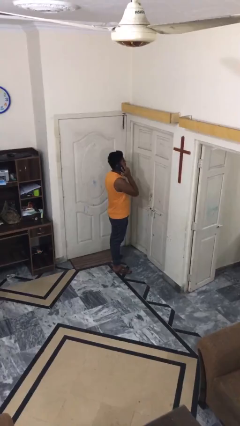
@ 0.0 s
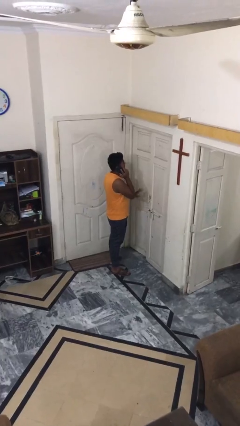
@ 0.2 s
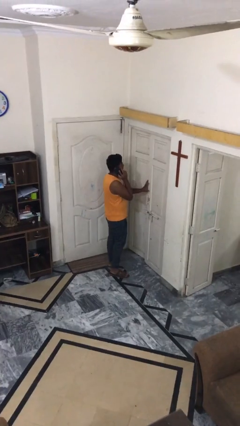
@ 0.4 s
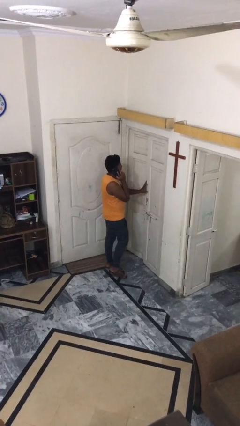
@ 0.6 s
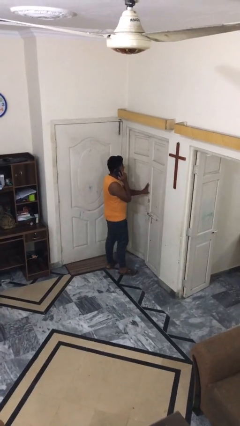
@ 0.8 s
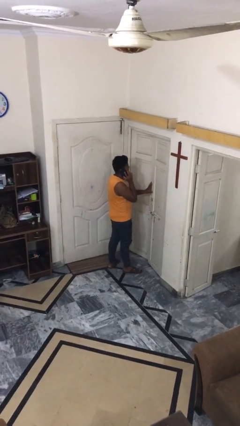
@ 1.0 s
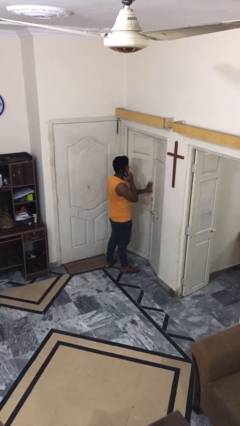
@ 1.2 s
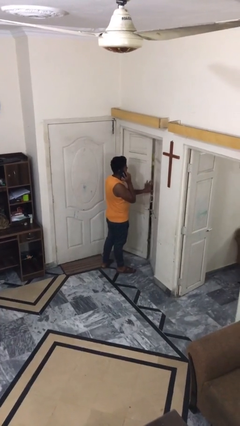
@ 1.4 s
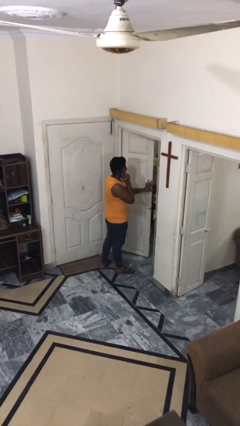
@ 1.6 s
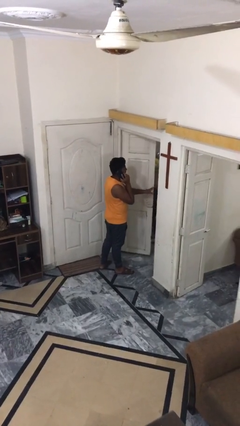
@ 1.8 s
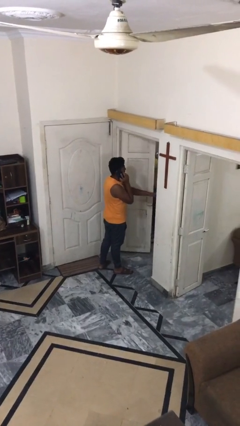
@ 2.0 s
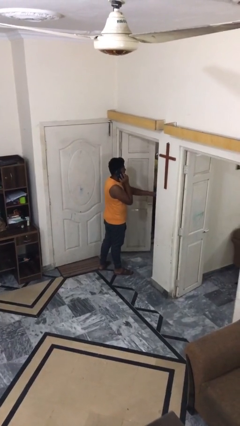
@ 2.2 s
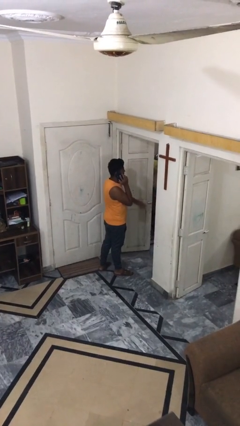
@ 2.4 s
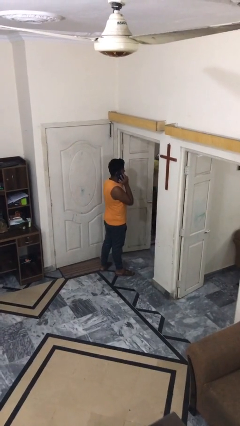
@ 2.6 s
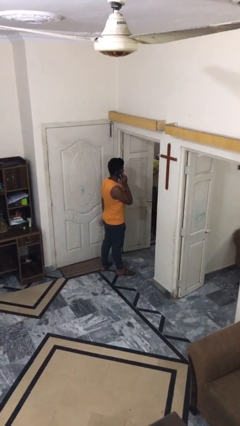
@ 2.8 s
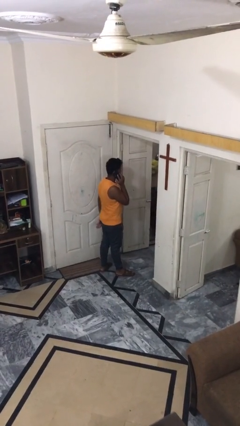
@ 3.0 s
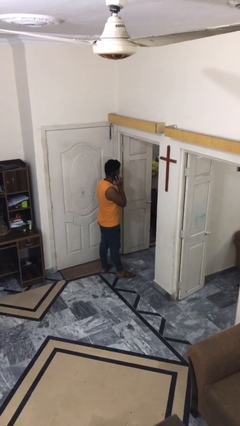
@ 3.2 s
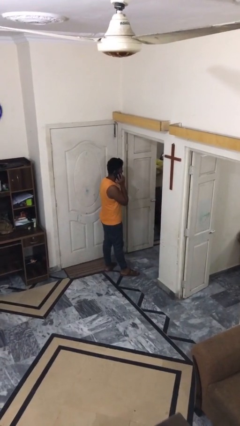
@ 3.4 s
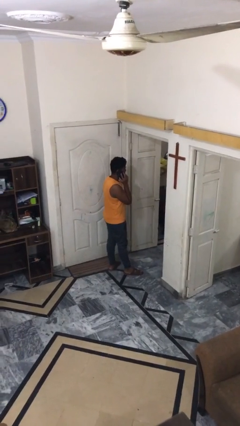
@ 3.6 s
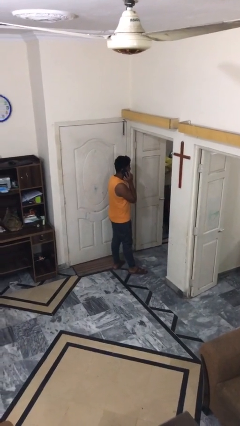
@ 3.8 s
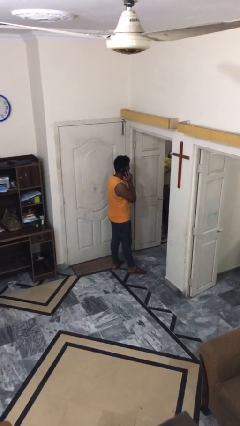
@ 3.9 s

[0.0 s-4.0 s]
person opens facility door

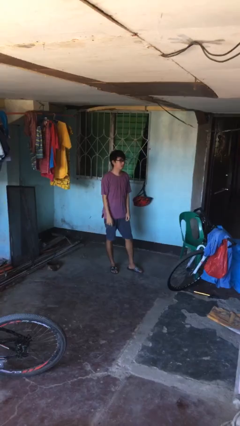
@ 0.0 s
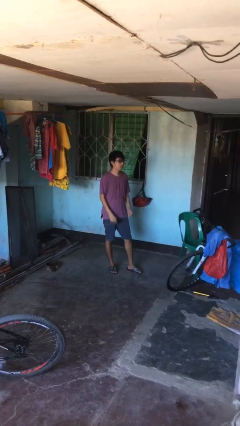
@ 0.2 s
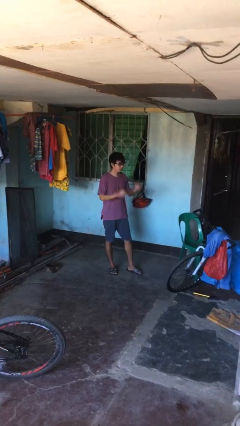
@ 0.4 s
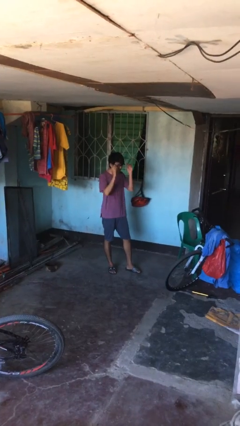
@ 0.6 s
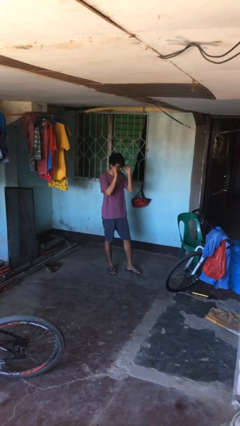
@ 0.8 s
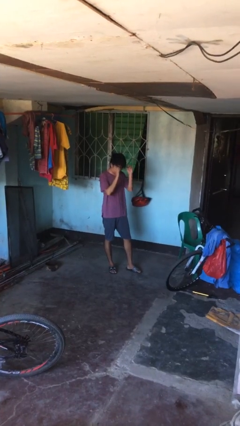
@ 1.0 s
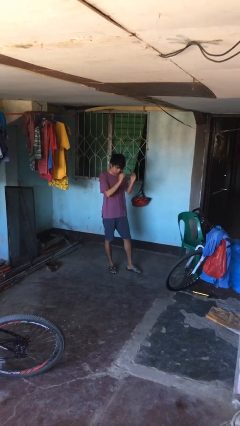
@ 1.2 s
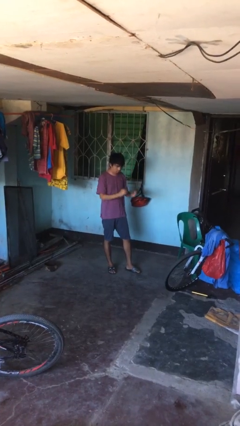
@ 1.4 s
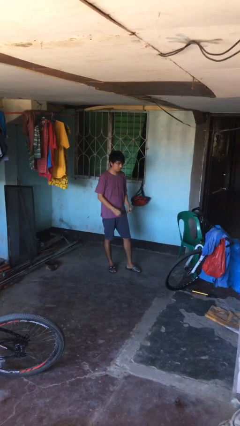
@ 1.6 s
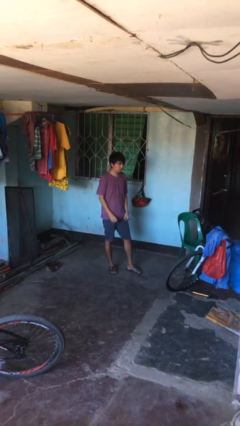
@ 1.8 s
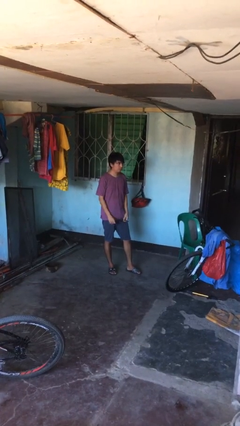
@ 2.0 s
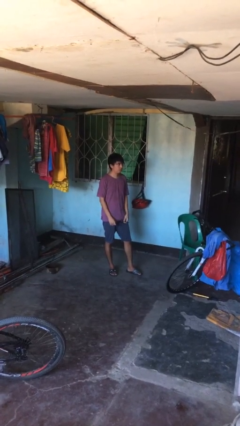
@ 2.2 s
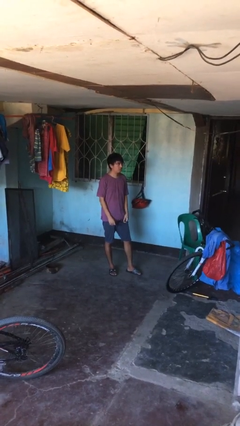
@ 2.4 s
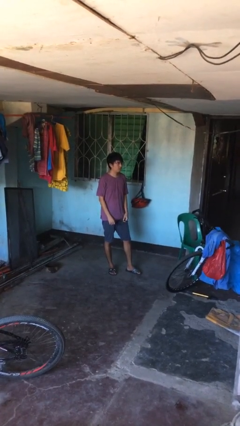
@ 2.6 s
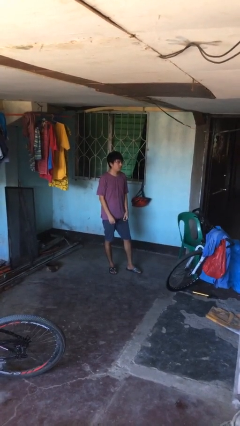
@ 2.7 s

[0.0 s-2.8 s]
person takes off glasses

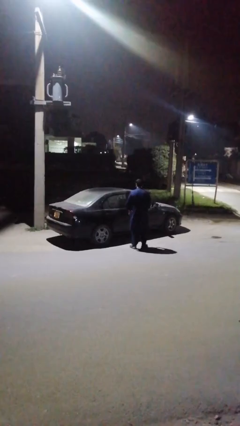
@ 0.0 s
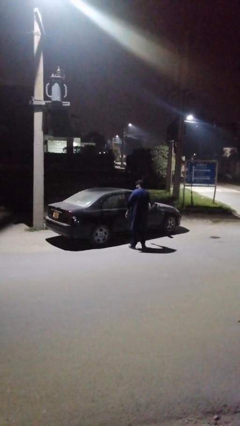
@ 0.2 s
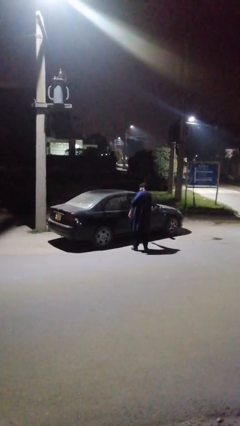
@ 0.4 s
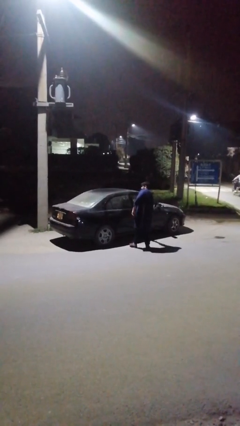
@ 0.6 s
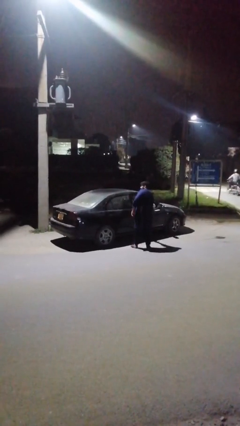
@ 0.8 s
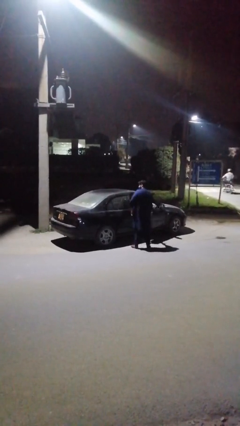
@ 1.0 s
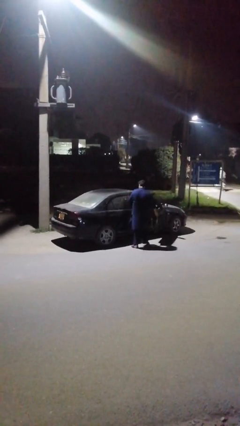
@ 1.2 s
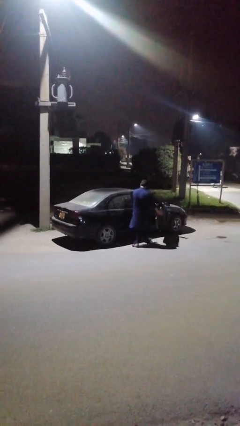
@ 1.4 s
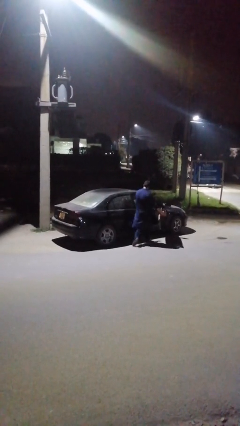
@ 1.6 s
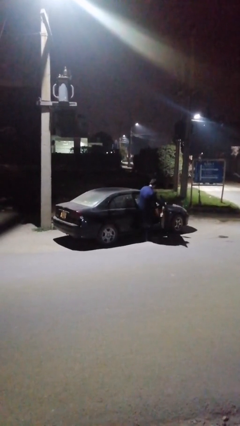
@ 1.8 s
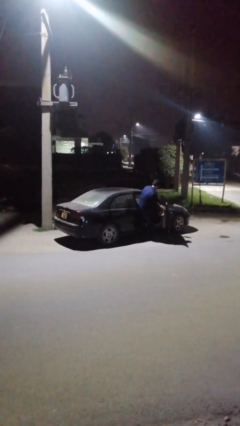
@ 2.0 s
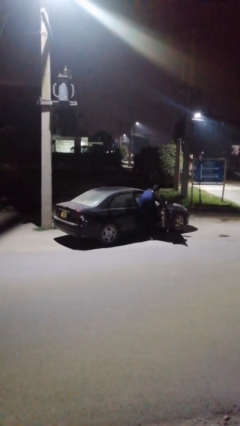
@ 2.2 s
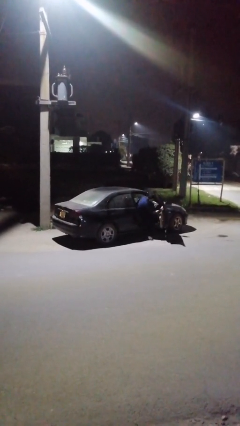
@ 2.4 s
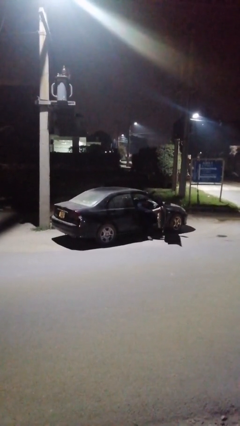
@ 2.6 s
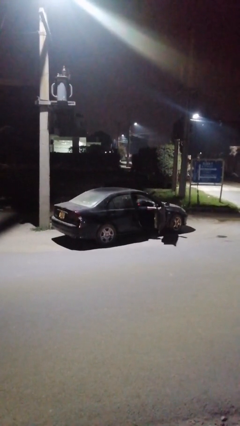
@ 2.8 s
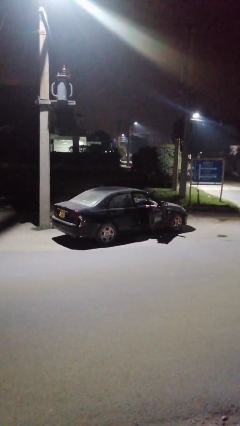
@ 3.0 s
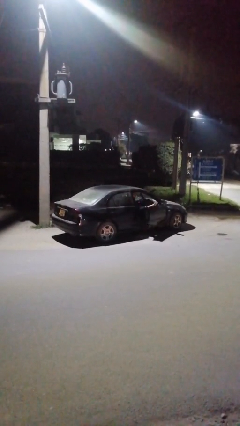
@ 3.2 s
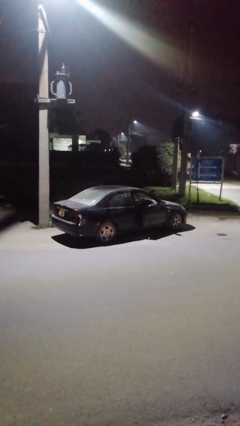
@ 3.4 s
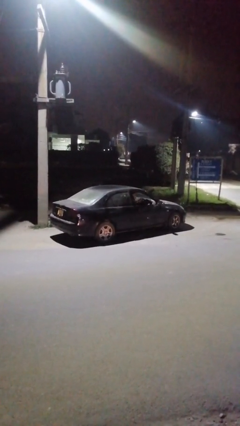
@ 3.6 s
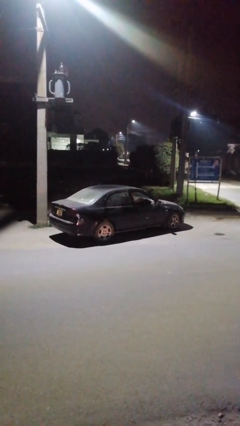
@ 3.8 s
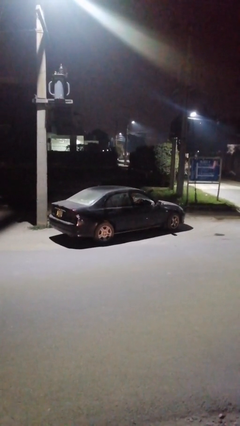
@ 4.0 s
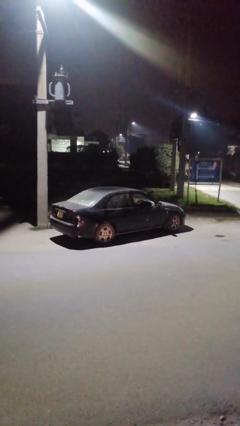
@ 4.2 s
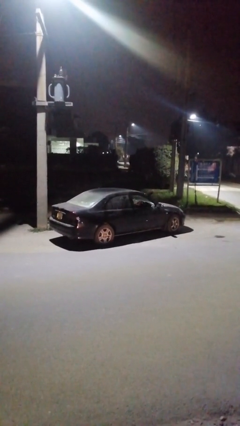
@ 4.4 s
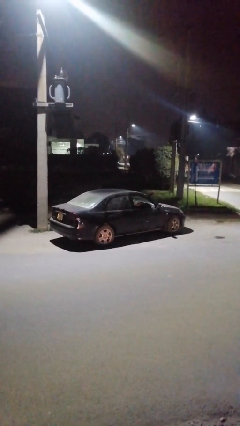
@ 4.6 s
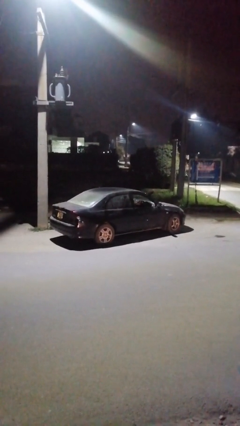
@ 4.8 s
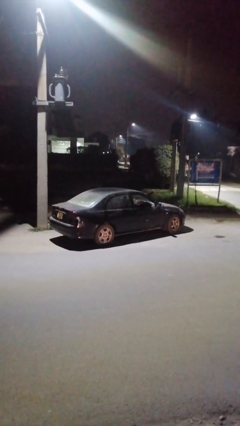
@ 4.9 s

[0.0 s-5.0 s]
car picks up person

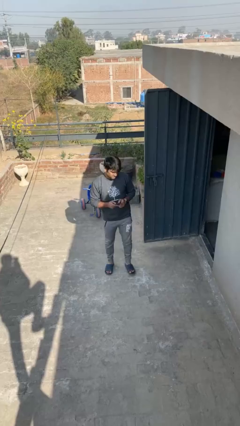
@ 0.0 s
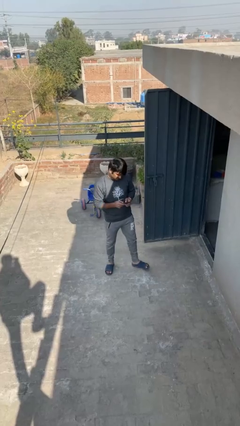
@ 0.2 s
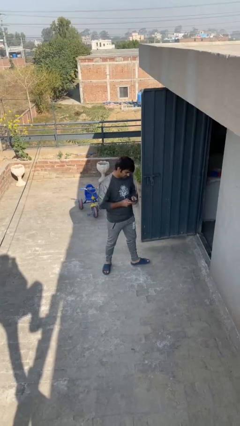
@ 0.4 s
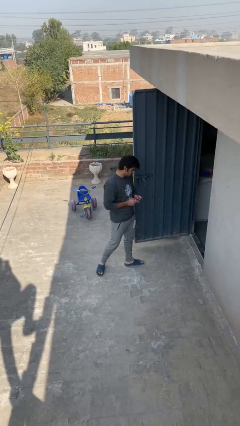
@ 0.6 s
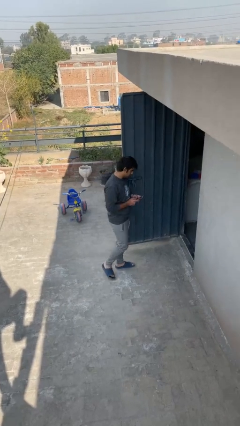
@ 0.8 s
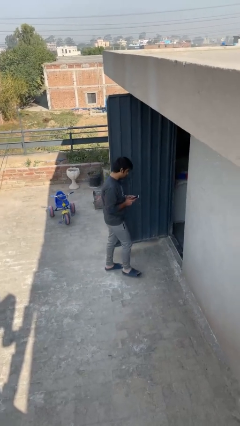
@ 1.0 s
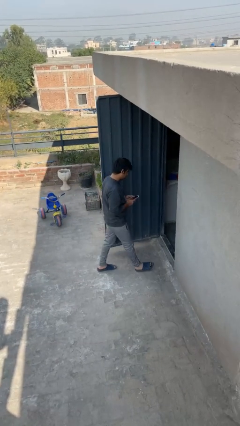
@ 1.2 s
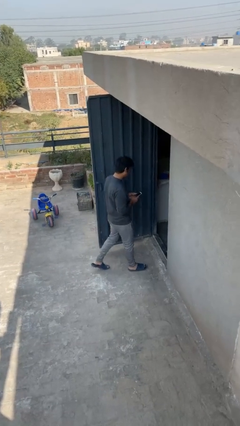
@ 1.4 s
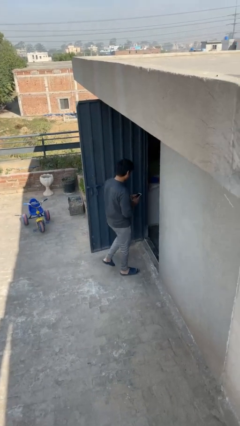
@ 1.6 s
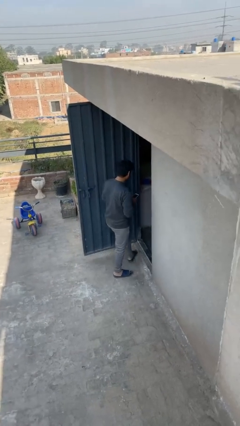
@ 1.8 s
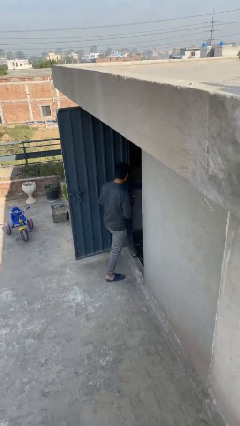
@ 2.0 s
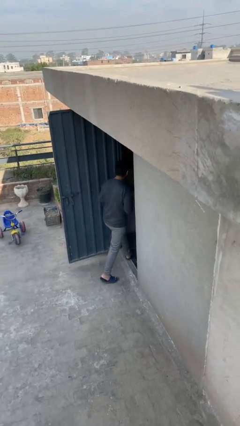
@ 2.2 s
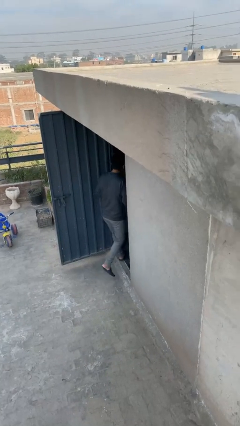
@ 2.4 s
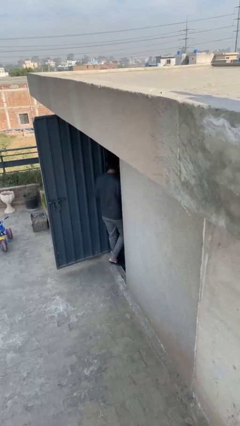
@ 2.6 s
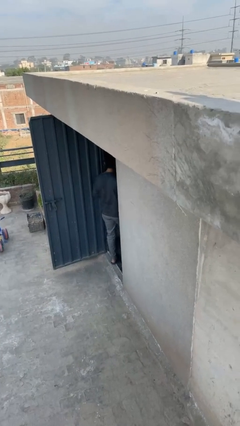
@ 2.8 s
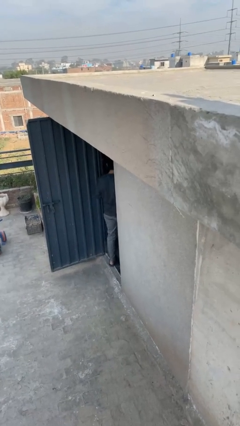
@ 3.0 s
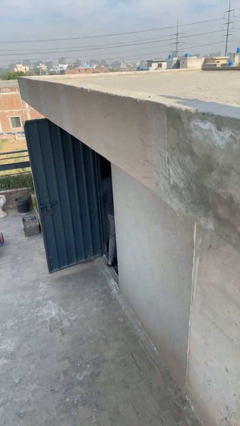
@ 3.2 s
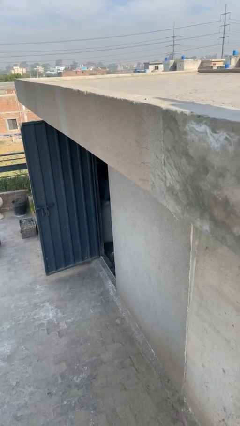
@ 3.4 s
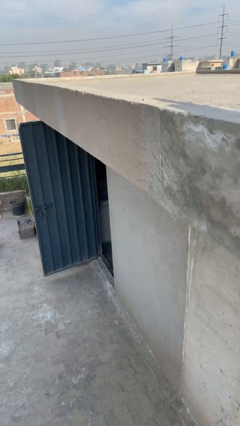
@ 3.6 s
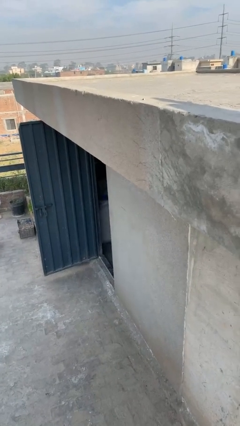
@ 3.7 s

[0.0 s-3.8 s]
person exits scene through structure

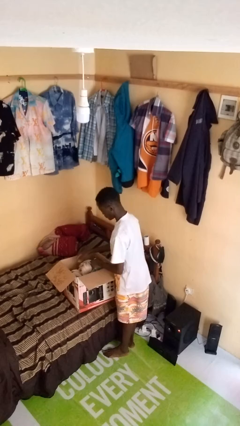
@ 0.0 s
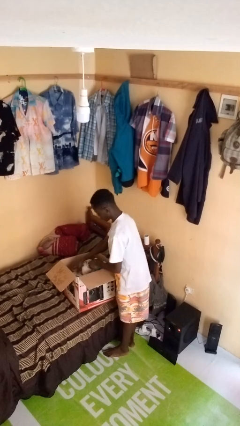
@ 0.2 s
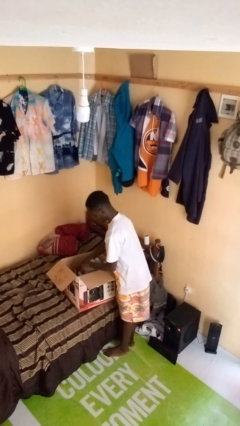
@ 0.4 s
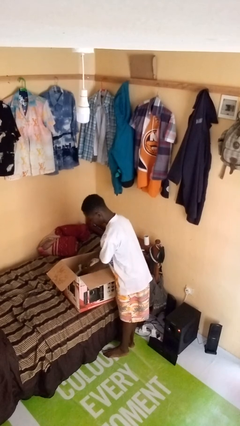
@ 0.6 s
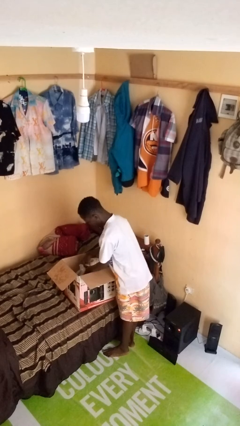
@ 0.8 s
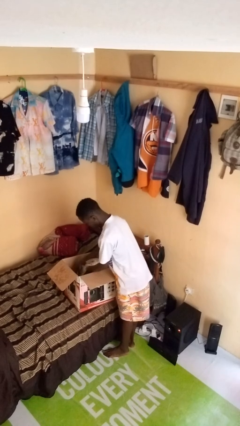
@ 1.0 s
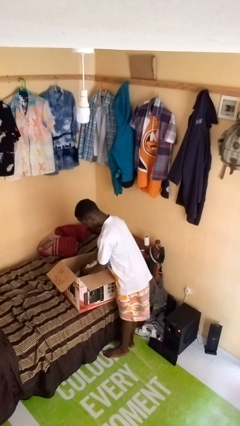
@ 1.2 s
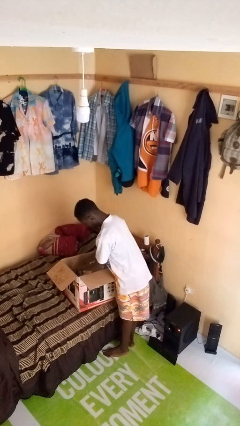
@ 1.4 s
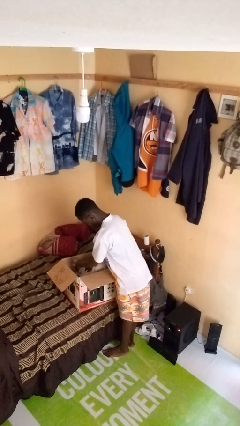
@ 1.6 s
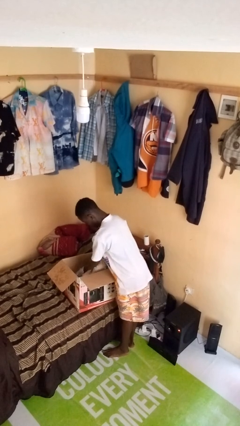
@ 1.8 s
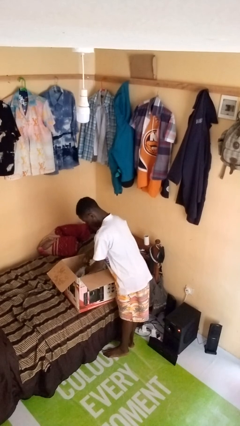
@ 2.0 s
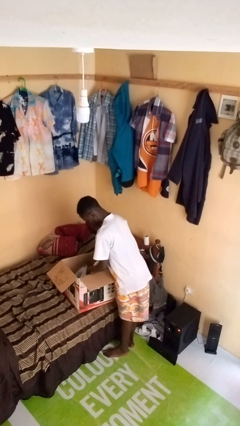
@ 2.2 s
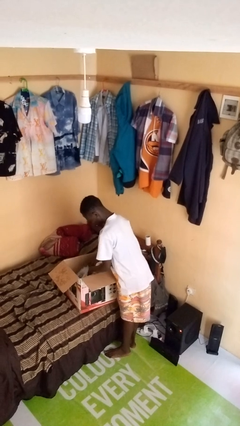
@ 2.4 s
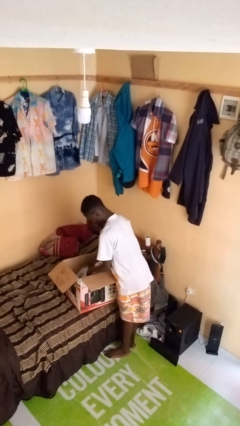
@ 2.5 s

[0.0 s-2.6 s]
person searches in box
